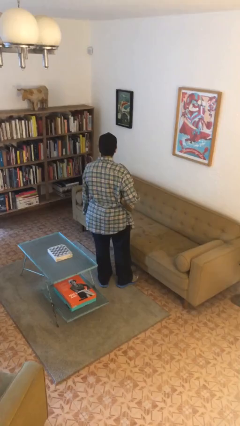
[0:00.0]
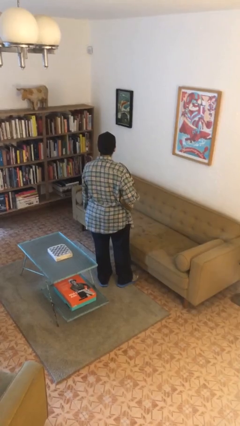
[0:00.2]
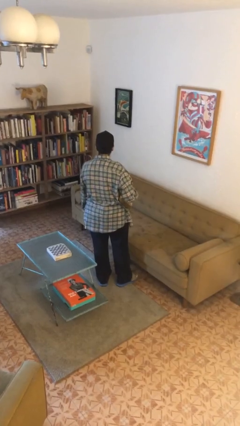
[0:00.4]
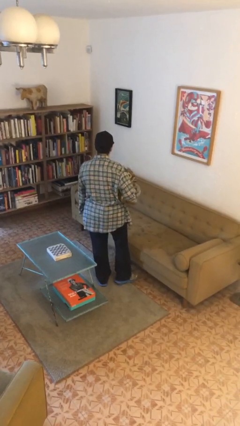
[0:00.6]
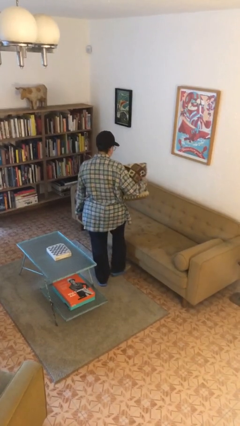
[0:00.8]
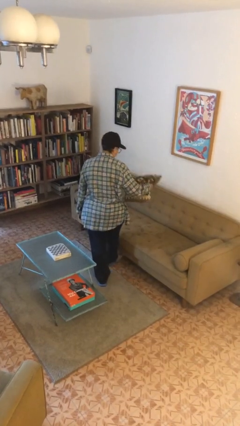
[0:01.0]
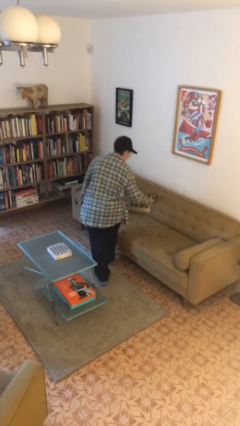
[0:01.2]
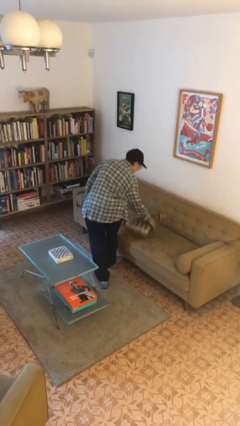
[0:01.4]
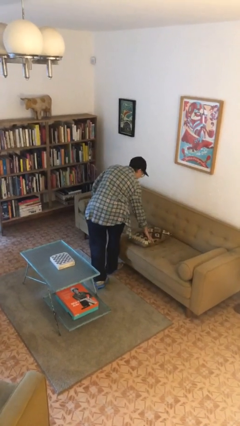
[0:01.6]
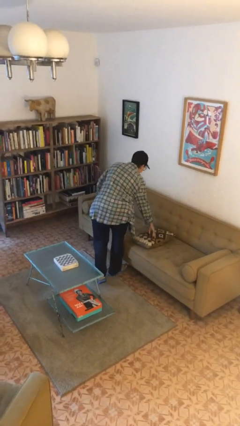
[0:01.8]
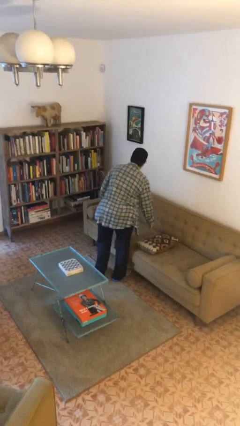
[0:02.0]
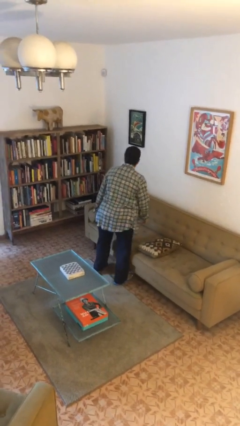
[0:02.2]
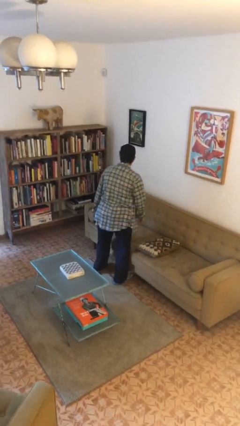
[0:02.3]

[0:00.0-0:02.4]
person puts down object on couch

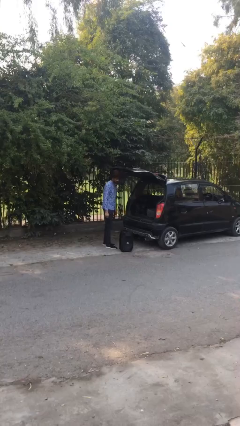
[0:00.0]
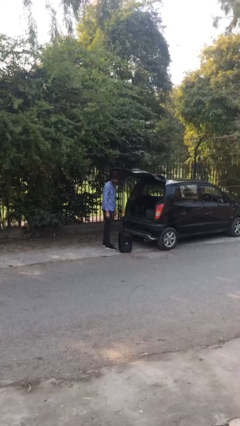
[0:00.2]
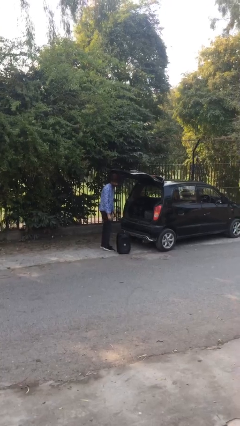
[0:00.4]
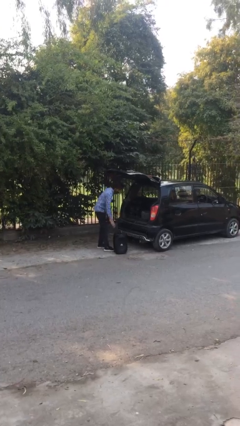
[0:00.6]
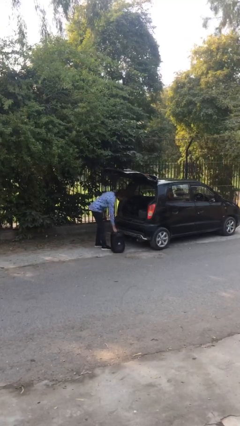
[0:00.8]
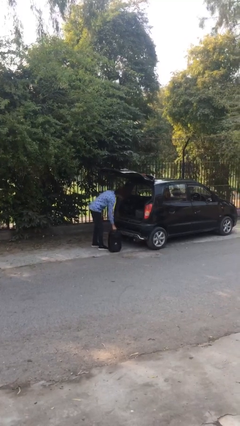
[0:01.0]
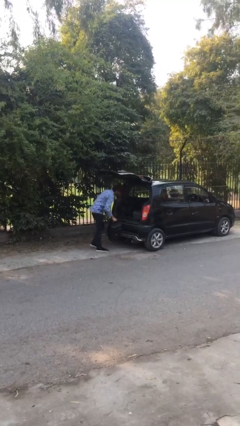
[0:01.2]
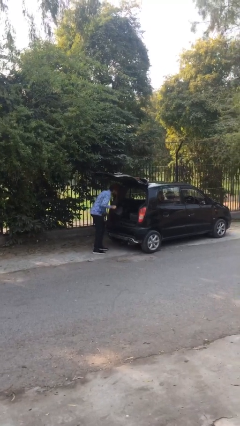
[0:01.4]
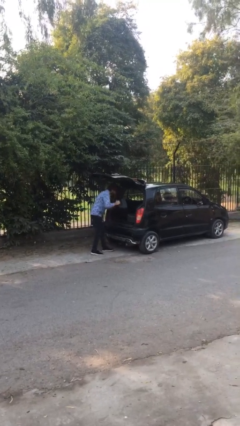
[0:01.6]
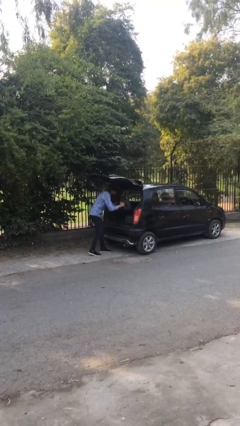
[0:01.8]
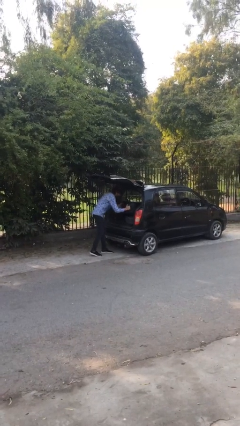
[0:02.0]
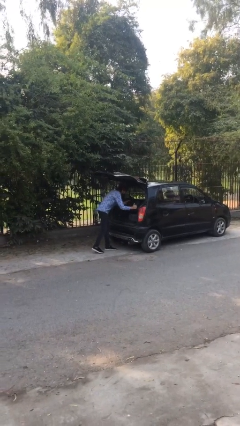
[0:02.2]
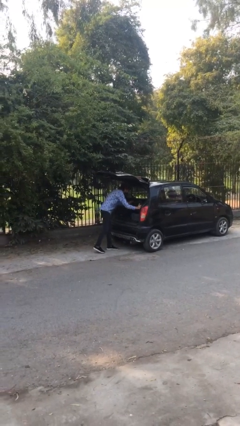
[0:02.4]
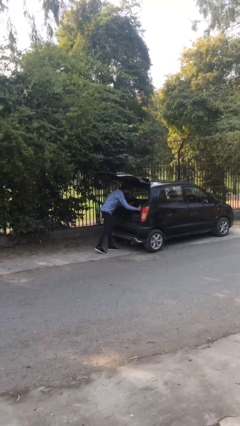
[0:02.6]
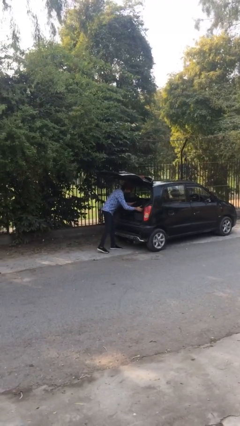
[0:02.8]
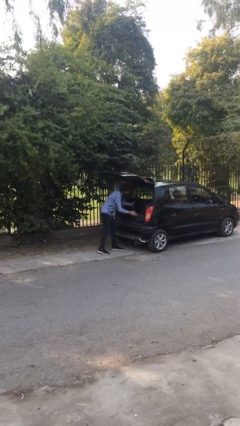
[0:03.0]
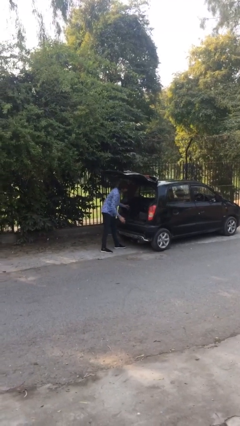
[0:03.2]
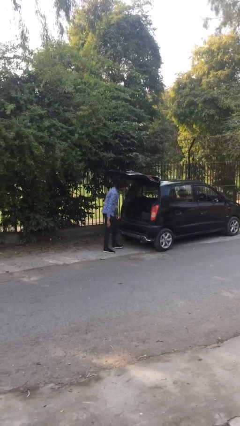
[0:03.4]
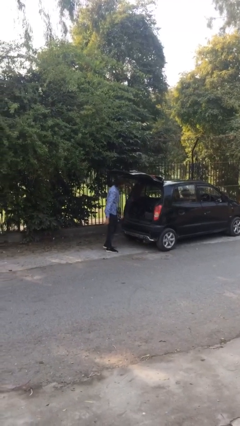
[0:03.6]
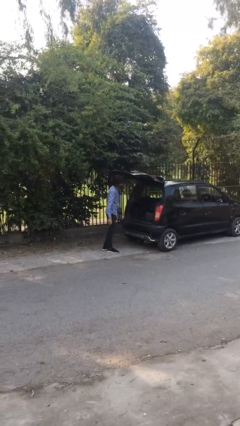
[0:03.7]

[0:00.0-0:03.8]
person loads car

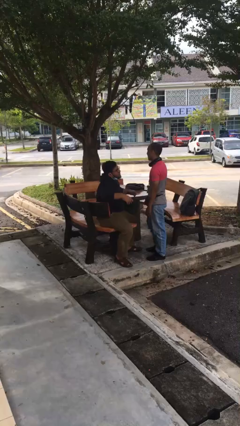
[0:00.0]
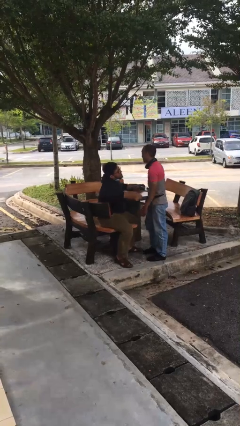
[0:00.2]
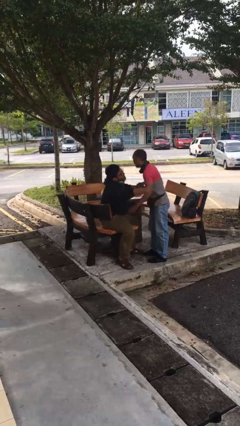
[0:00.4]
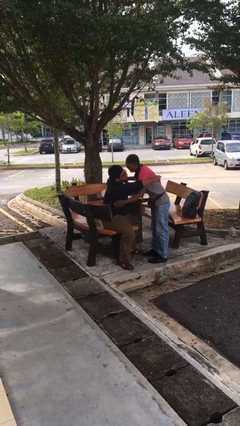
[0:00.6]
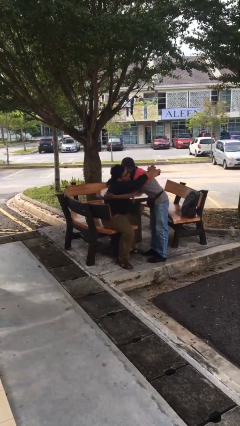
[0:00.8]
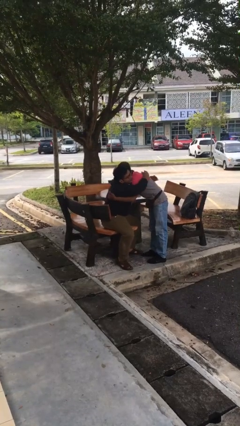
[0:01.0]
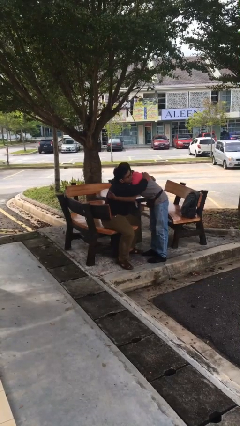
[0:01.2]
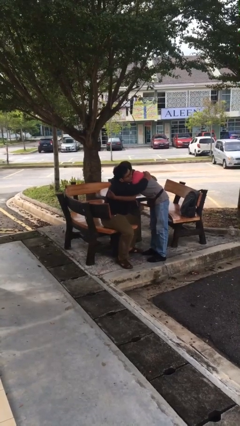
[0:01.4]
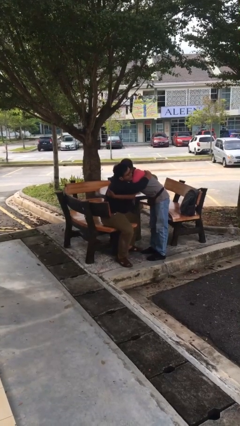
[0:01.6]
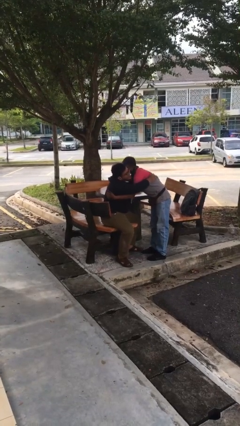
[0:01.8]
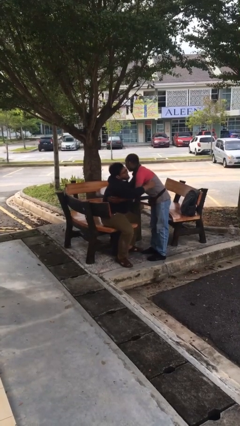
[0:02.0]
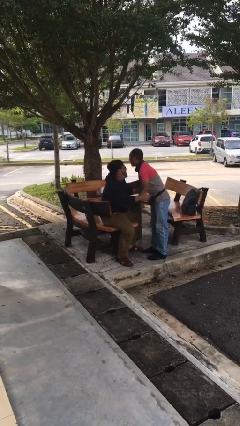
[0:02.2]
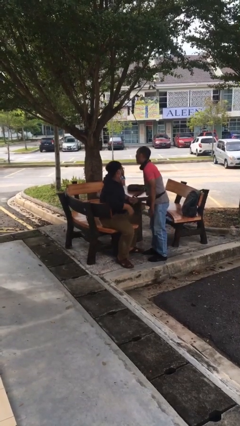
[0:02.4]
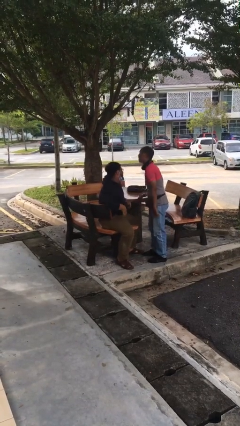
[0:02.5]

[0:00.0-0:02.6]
person embraces person

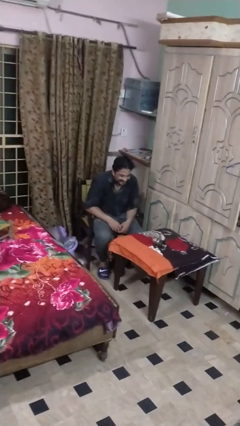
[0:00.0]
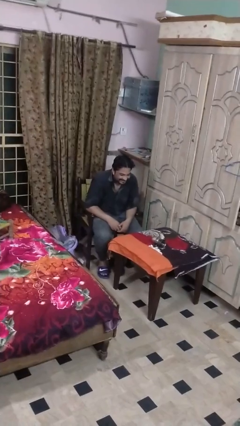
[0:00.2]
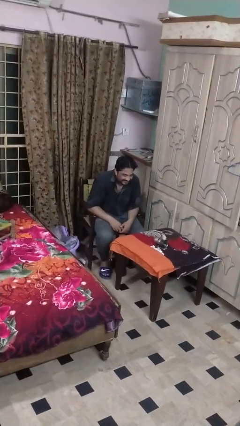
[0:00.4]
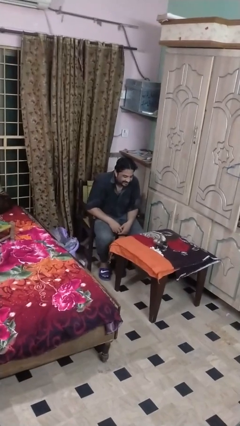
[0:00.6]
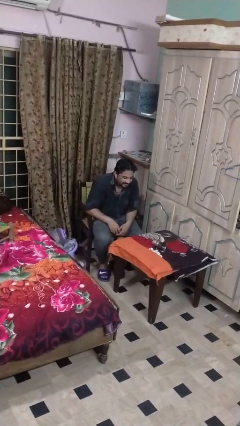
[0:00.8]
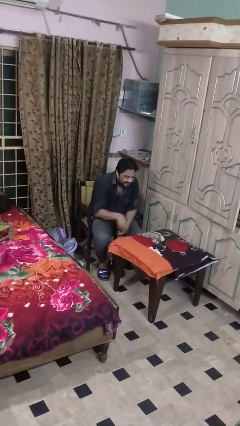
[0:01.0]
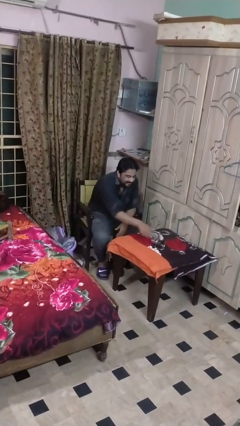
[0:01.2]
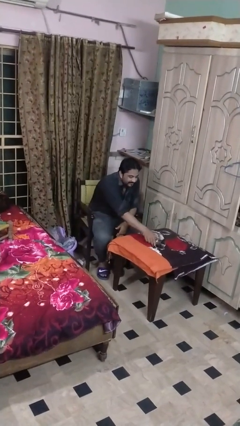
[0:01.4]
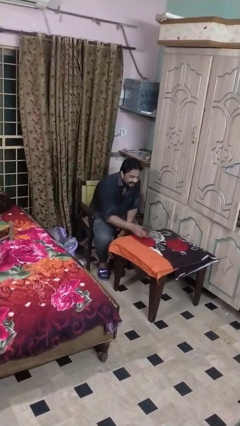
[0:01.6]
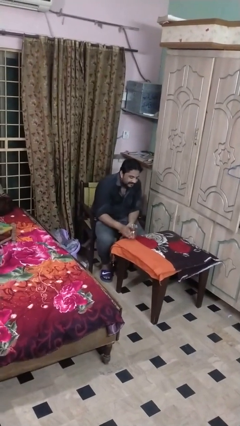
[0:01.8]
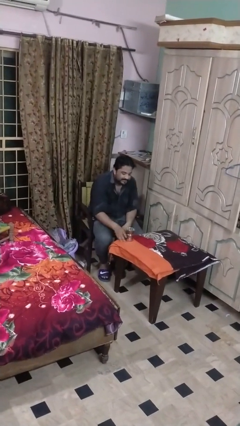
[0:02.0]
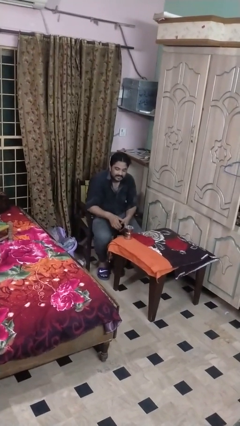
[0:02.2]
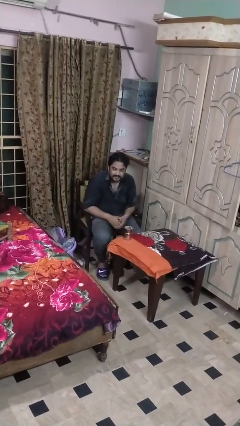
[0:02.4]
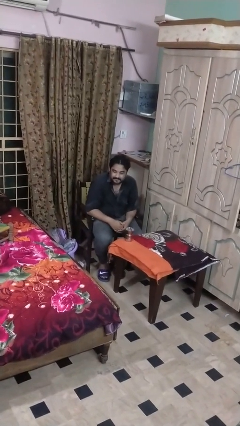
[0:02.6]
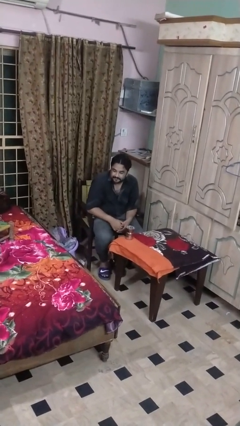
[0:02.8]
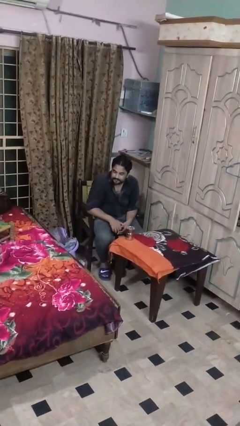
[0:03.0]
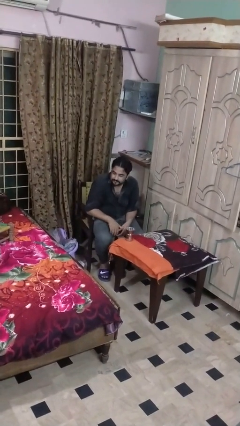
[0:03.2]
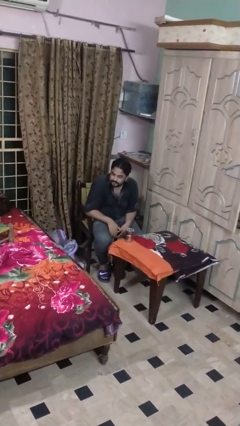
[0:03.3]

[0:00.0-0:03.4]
person sets upright glass

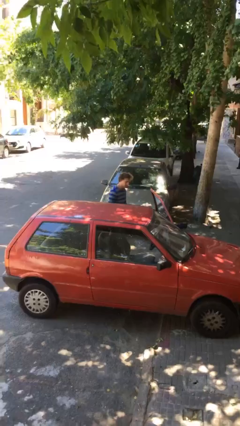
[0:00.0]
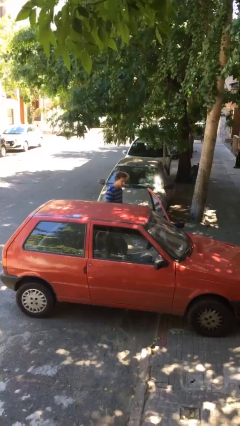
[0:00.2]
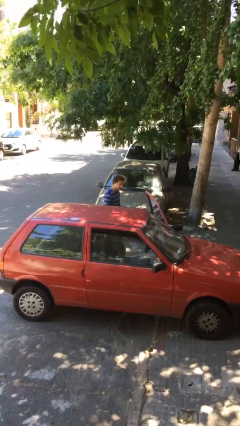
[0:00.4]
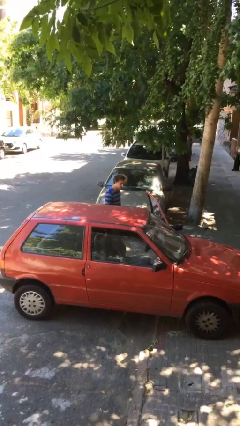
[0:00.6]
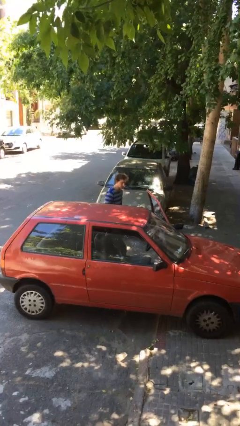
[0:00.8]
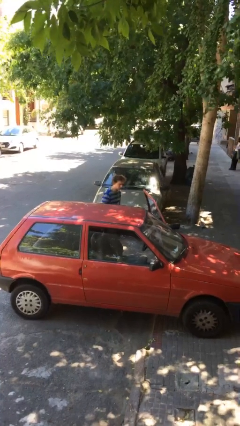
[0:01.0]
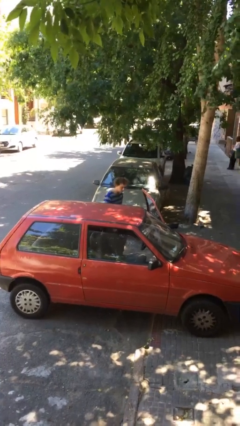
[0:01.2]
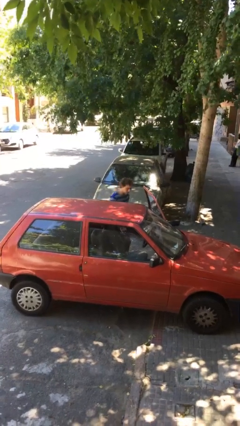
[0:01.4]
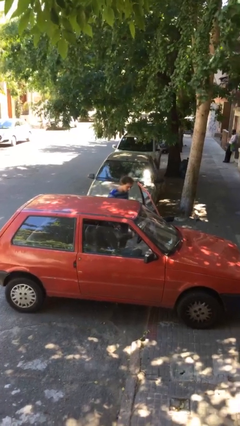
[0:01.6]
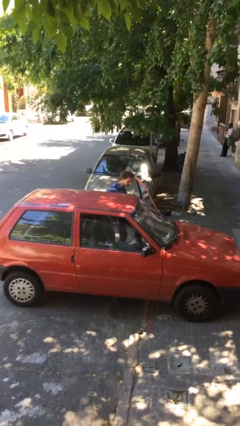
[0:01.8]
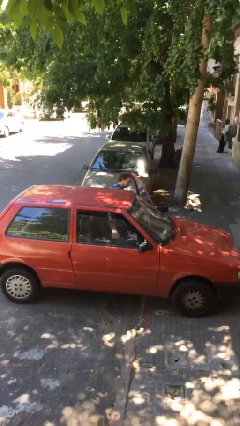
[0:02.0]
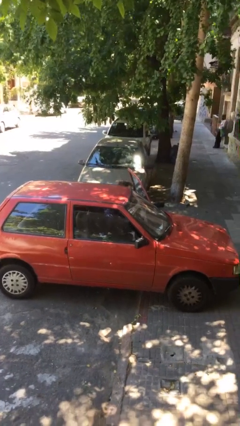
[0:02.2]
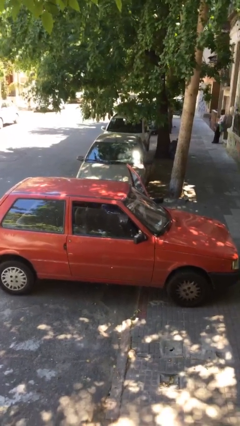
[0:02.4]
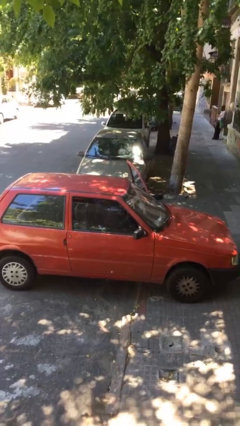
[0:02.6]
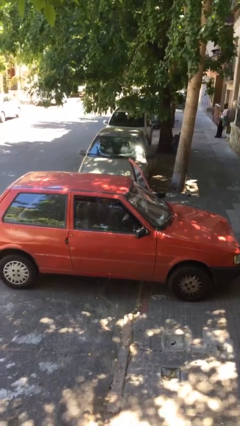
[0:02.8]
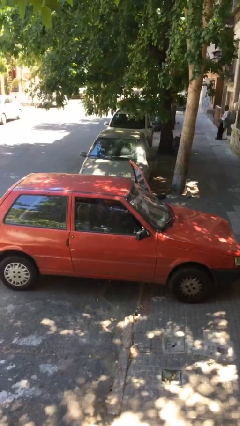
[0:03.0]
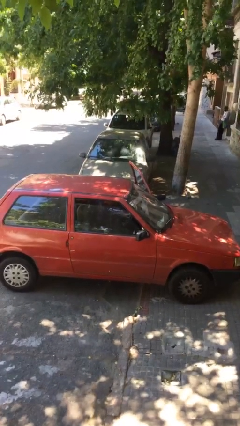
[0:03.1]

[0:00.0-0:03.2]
person enters car

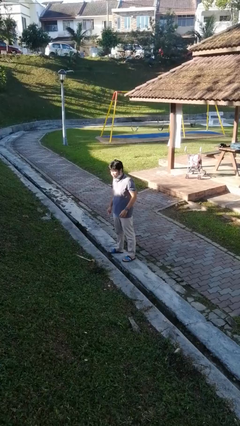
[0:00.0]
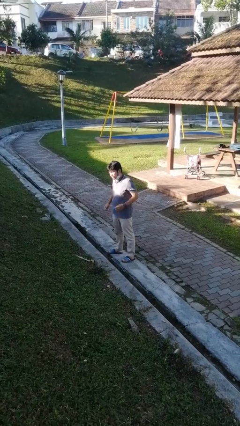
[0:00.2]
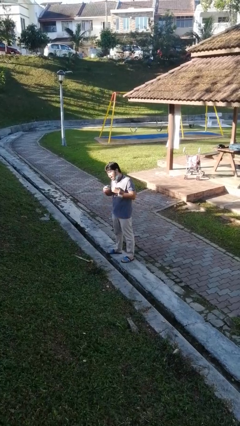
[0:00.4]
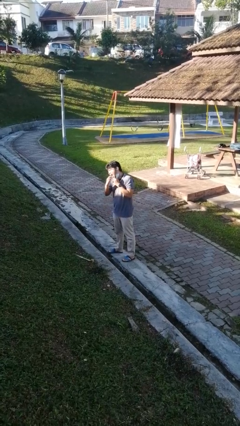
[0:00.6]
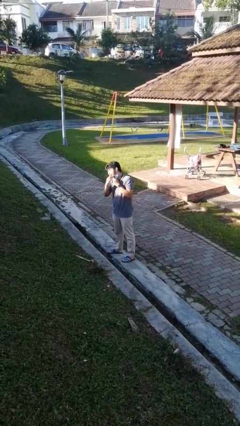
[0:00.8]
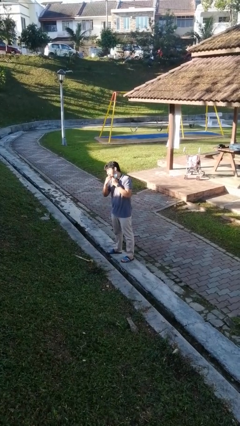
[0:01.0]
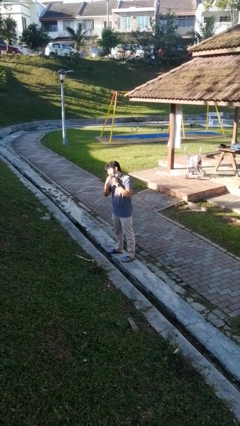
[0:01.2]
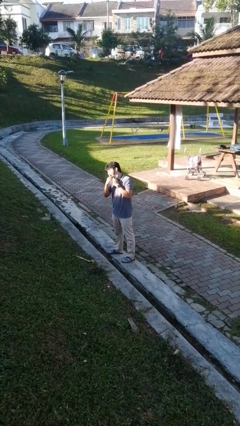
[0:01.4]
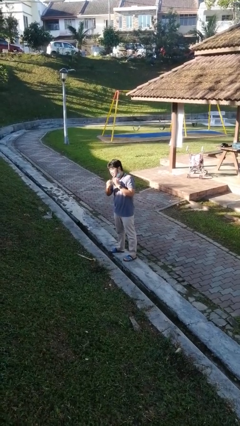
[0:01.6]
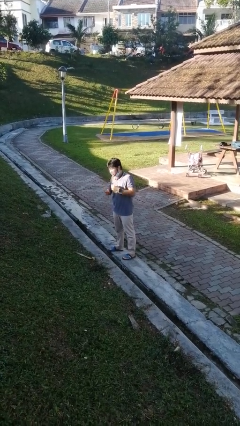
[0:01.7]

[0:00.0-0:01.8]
person flosses
